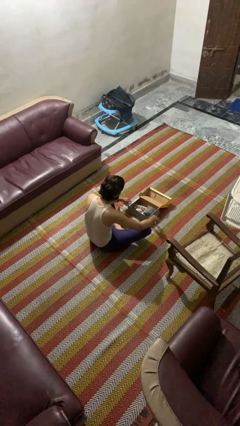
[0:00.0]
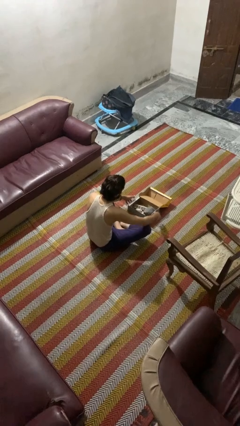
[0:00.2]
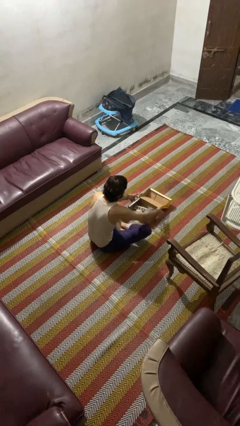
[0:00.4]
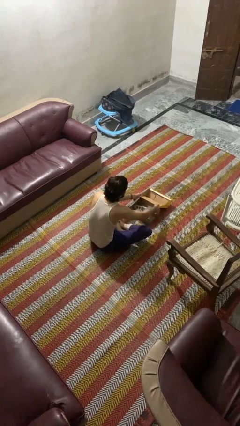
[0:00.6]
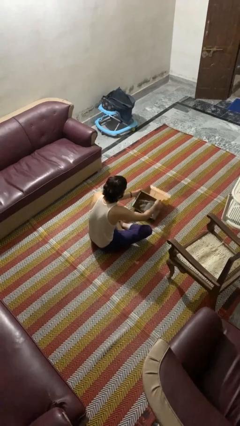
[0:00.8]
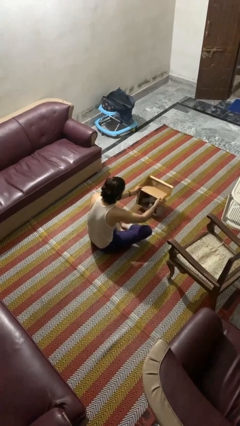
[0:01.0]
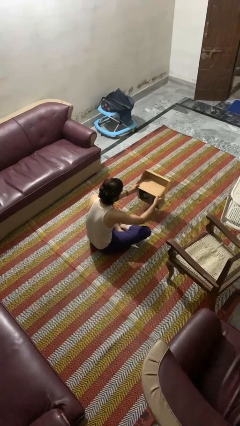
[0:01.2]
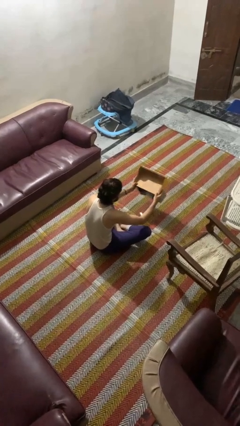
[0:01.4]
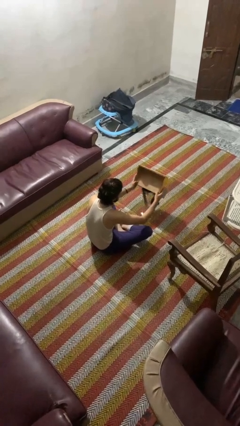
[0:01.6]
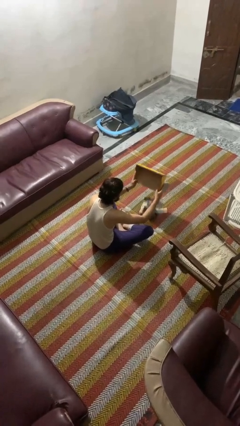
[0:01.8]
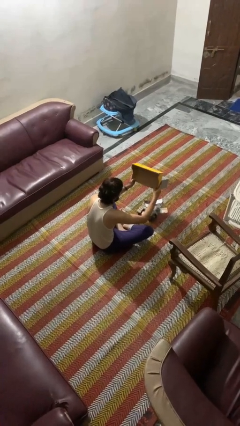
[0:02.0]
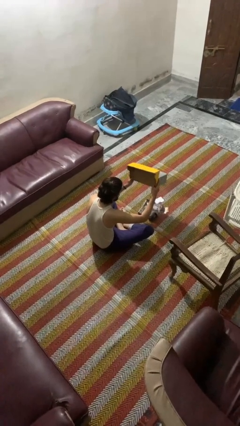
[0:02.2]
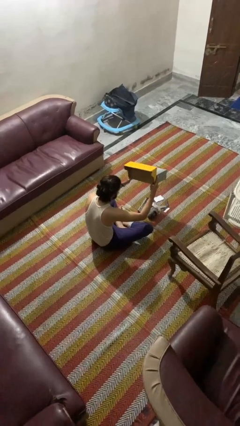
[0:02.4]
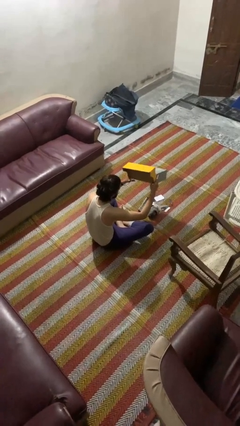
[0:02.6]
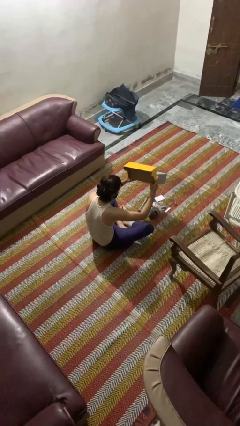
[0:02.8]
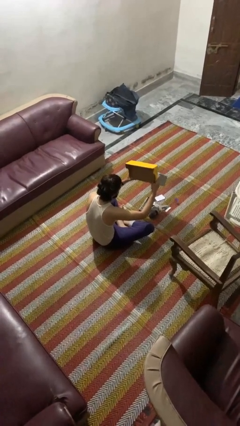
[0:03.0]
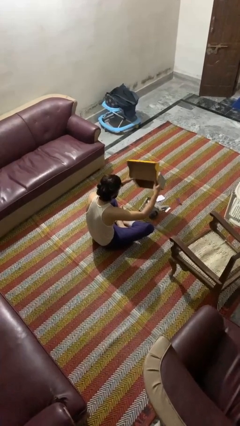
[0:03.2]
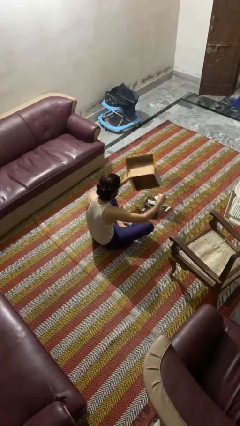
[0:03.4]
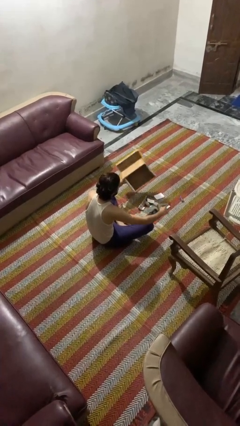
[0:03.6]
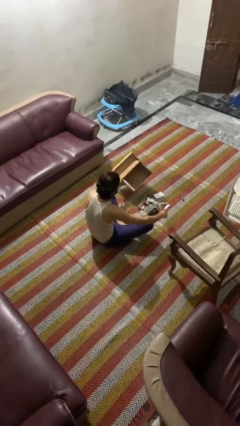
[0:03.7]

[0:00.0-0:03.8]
person unloads box onto floor

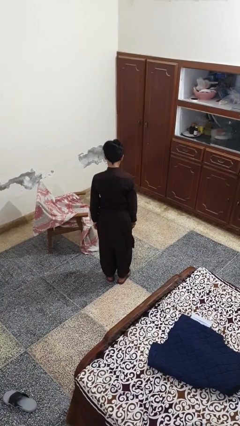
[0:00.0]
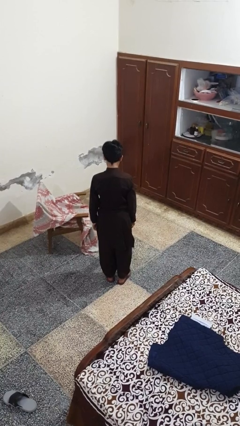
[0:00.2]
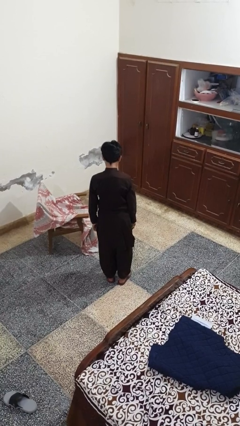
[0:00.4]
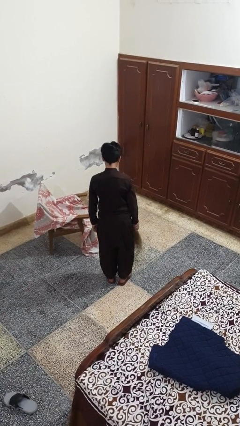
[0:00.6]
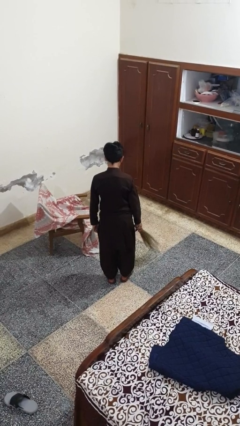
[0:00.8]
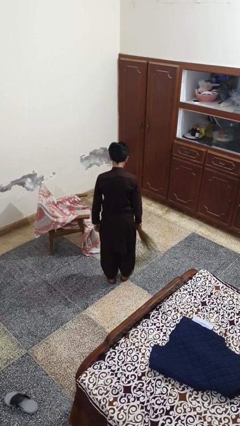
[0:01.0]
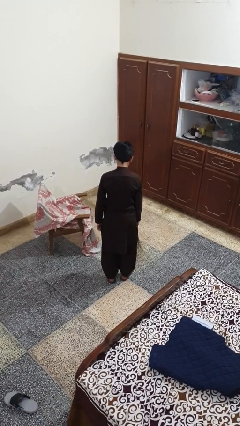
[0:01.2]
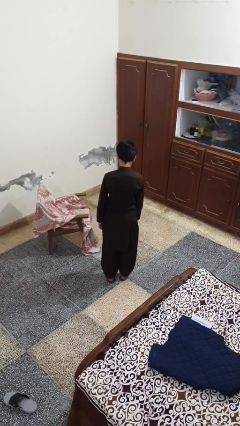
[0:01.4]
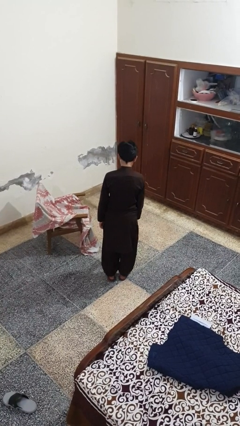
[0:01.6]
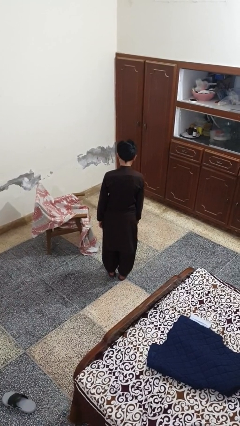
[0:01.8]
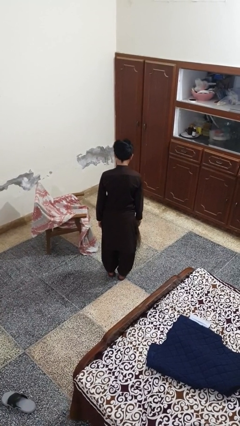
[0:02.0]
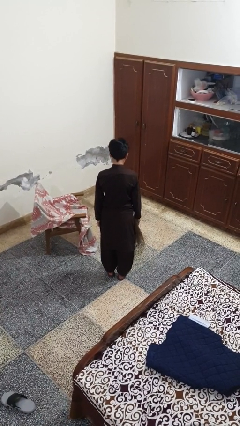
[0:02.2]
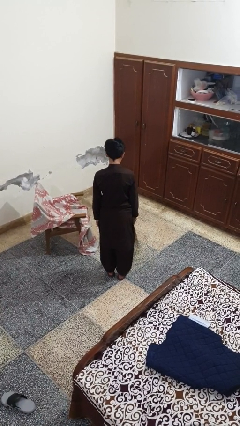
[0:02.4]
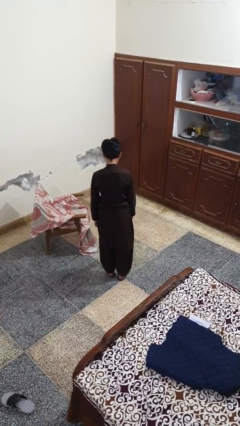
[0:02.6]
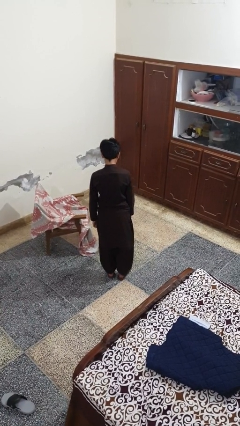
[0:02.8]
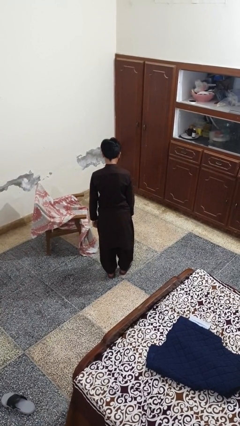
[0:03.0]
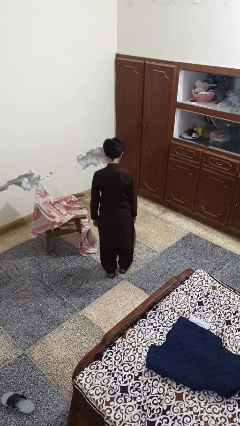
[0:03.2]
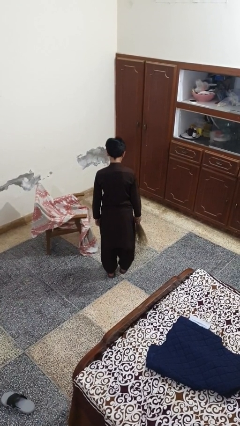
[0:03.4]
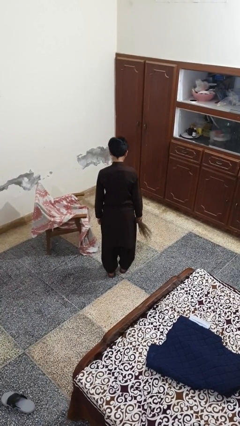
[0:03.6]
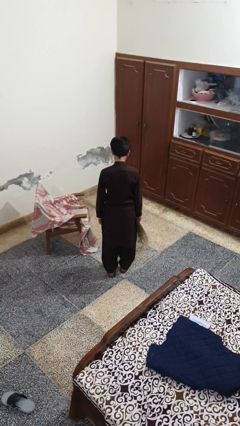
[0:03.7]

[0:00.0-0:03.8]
person sweeps floor

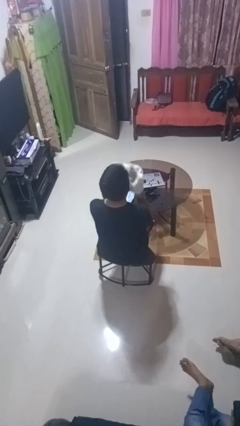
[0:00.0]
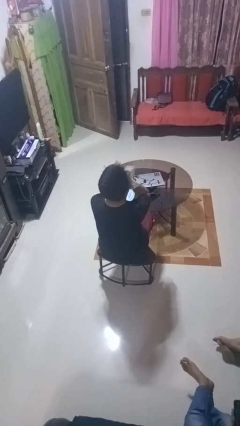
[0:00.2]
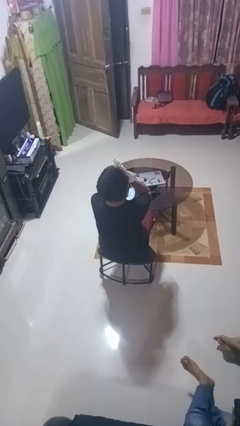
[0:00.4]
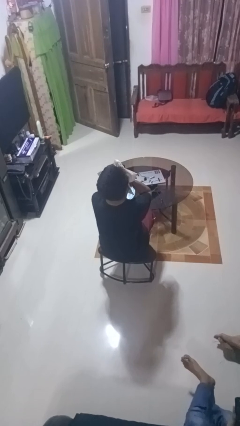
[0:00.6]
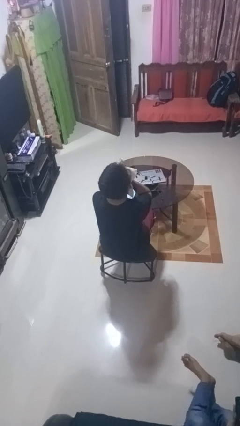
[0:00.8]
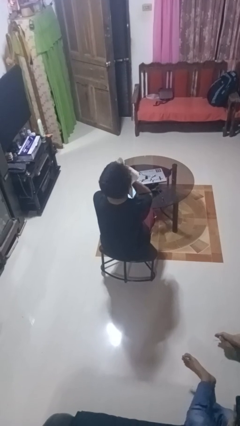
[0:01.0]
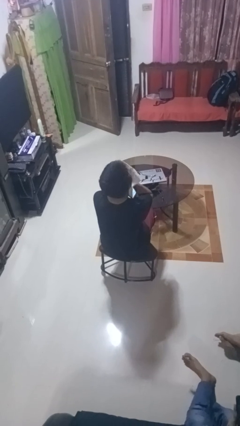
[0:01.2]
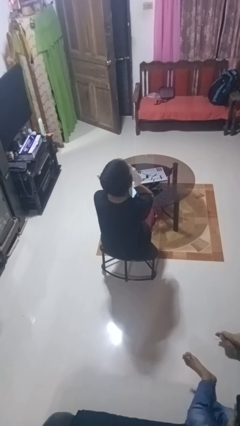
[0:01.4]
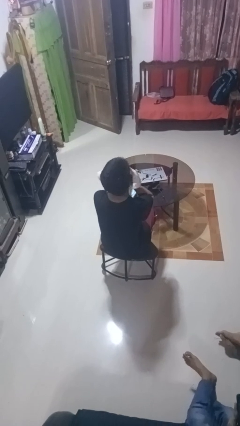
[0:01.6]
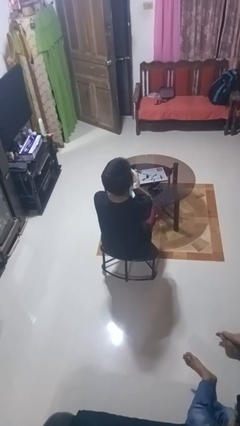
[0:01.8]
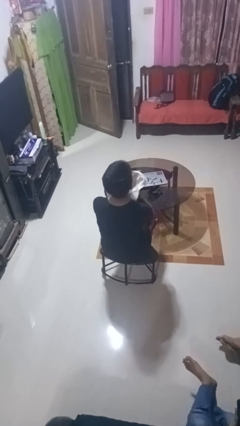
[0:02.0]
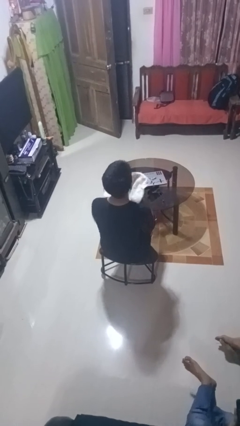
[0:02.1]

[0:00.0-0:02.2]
person wipes mouth with napkin

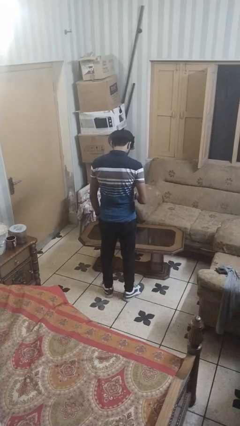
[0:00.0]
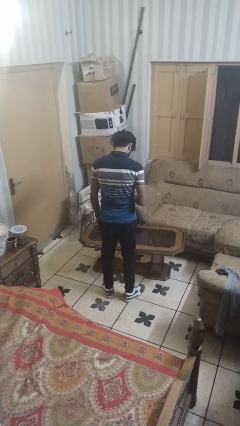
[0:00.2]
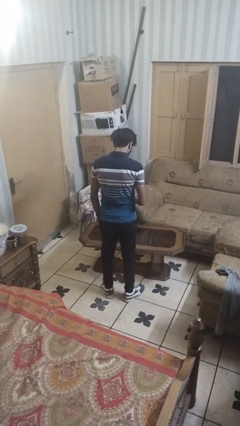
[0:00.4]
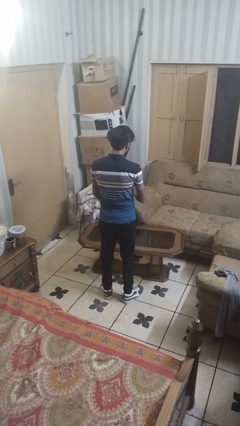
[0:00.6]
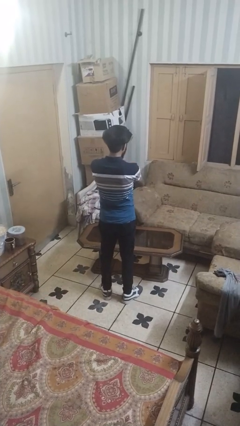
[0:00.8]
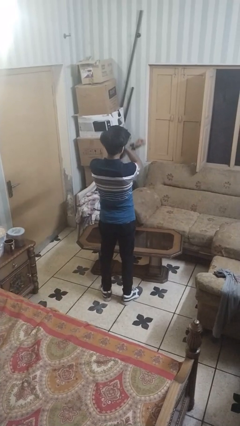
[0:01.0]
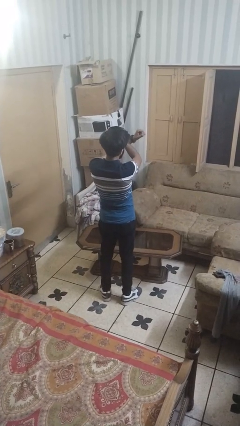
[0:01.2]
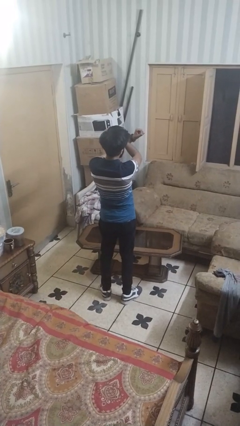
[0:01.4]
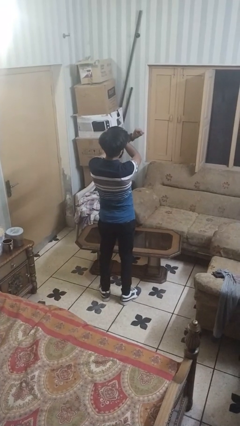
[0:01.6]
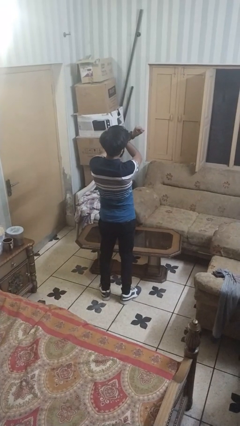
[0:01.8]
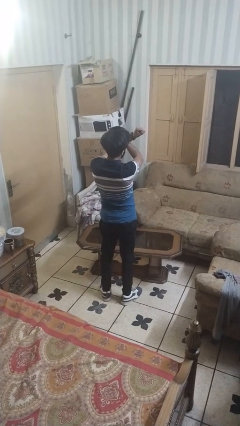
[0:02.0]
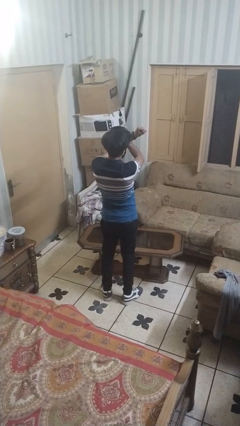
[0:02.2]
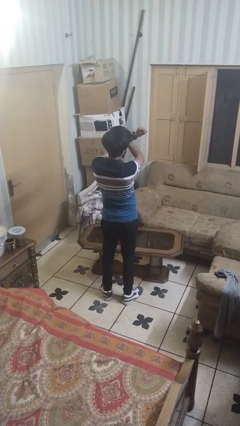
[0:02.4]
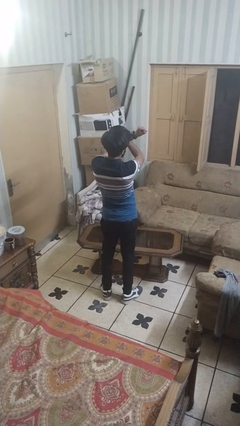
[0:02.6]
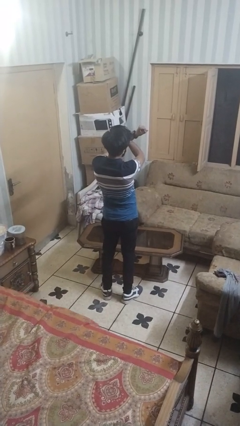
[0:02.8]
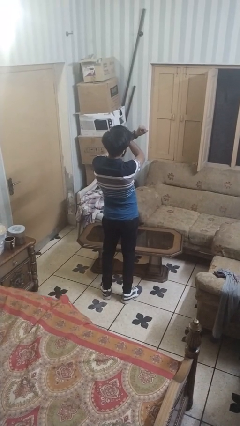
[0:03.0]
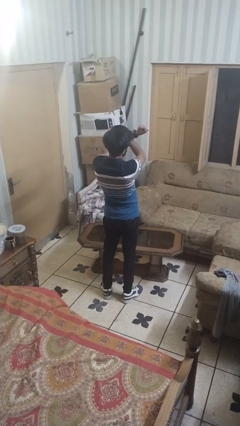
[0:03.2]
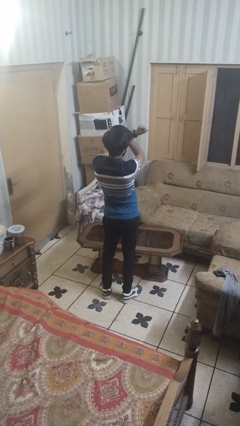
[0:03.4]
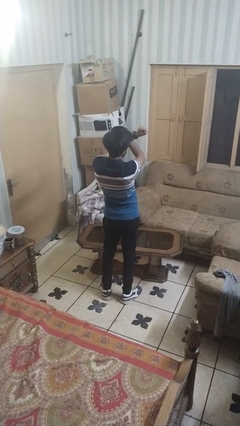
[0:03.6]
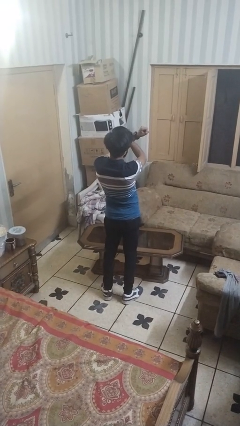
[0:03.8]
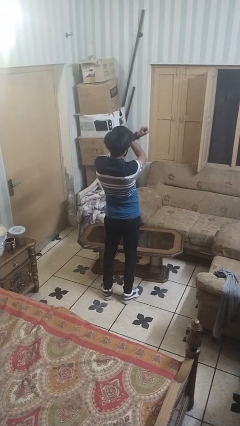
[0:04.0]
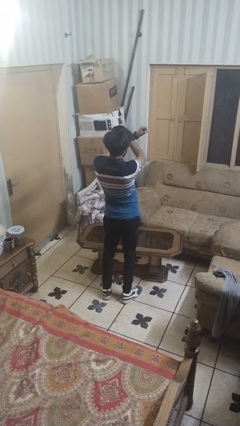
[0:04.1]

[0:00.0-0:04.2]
person gestures arms x

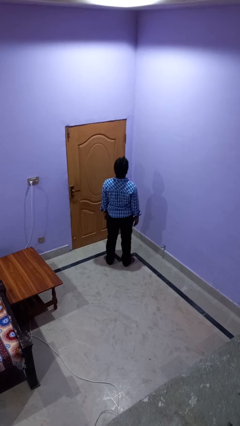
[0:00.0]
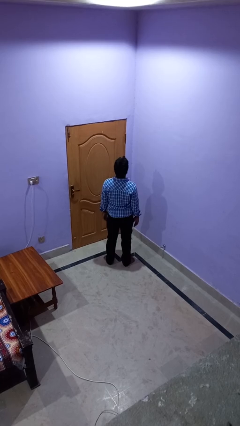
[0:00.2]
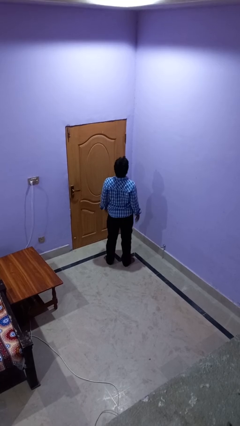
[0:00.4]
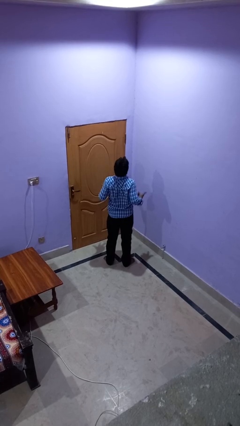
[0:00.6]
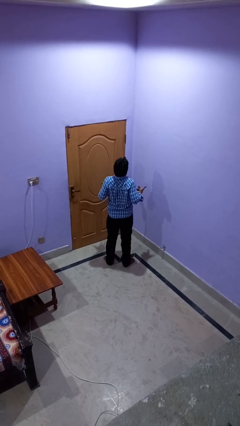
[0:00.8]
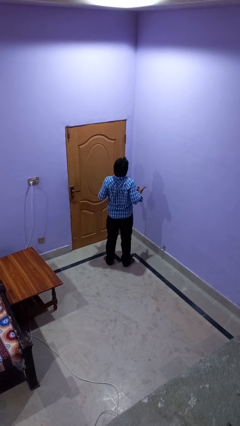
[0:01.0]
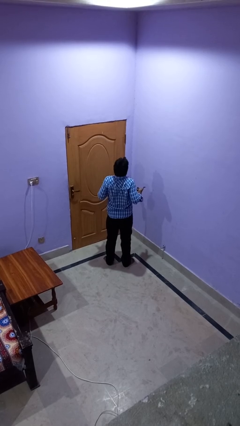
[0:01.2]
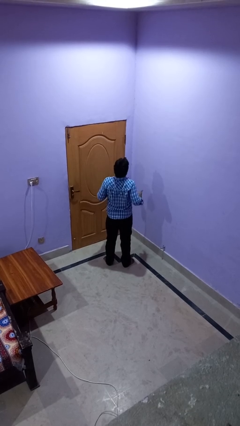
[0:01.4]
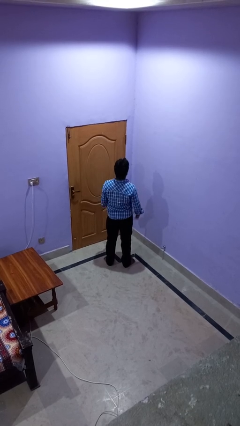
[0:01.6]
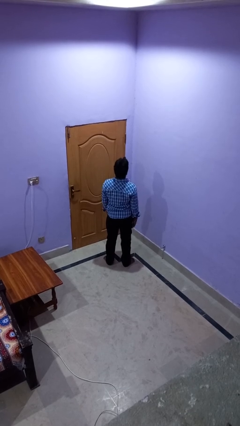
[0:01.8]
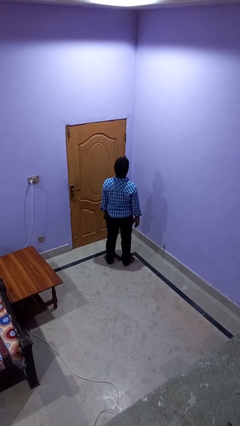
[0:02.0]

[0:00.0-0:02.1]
person shrugs

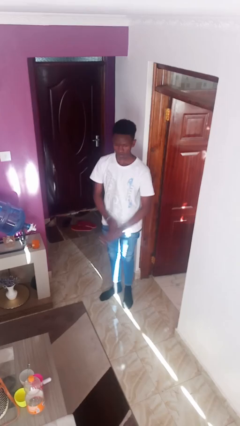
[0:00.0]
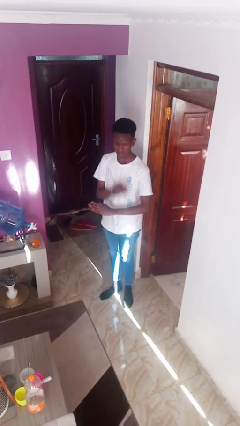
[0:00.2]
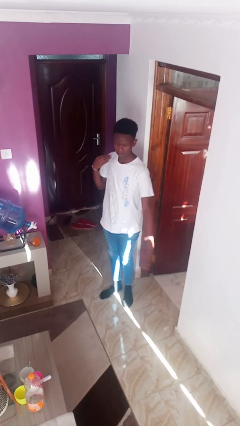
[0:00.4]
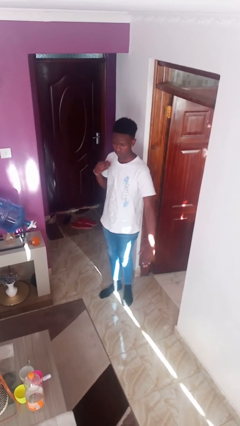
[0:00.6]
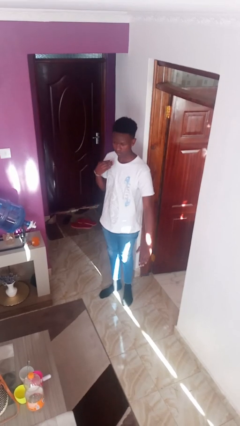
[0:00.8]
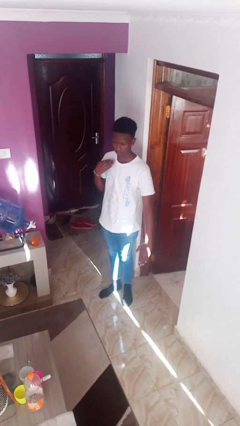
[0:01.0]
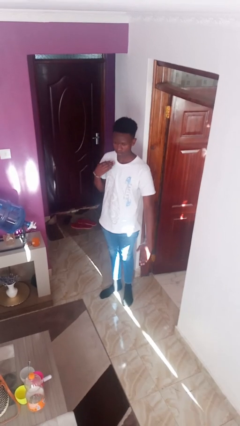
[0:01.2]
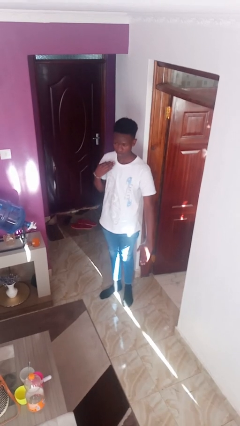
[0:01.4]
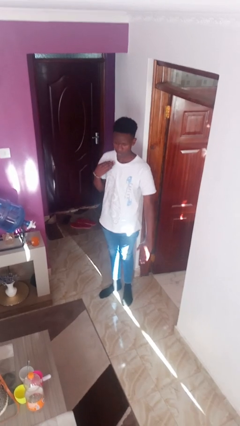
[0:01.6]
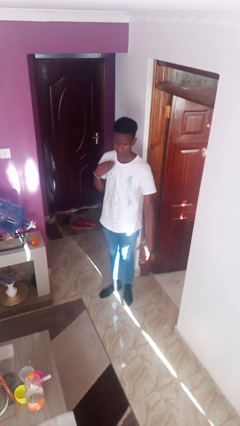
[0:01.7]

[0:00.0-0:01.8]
person karate chop
